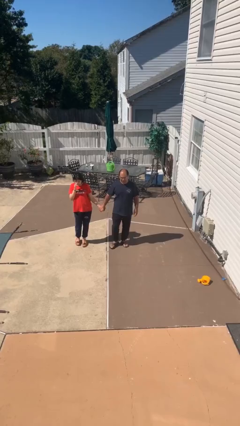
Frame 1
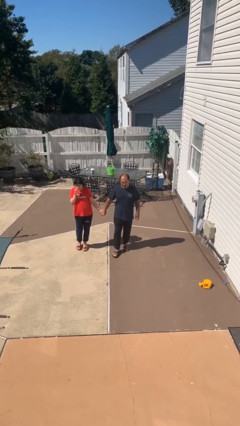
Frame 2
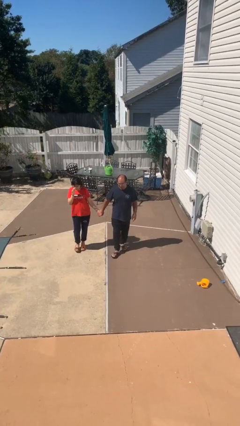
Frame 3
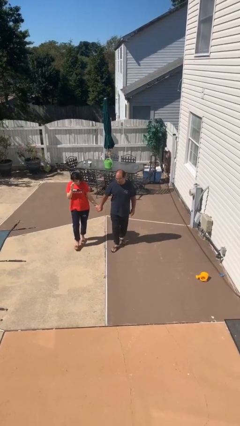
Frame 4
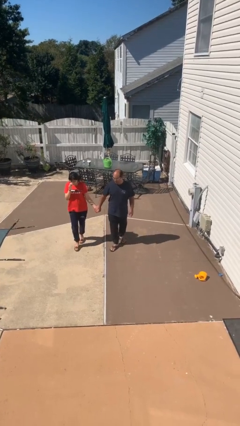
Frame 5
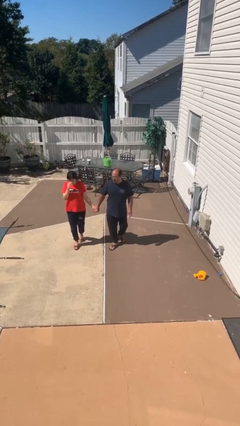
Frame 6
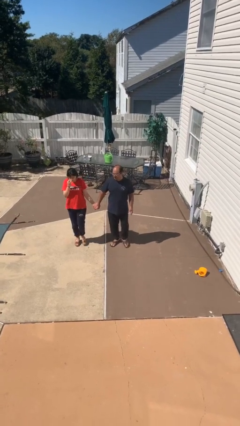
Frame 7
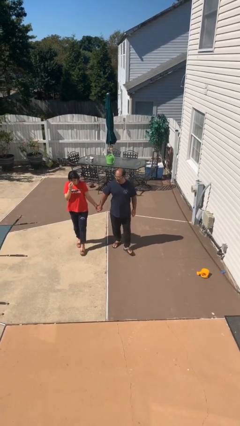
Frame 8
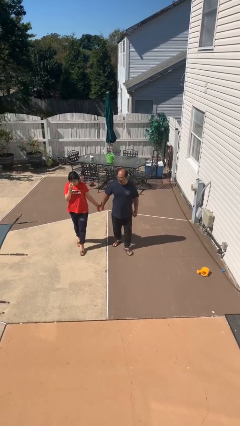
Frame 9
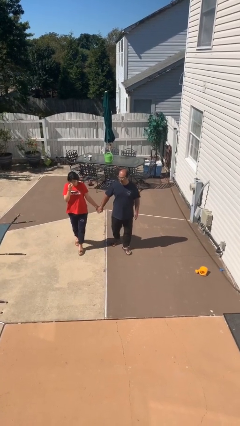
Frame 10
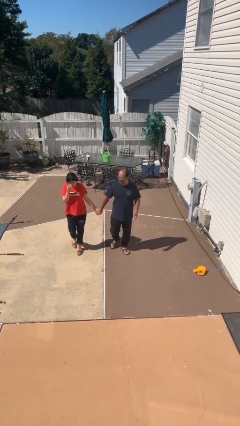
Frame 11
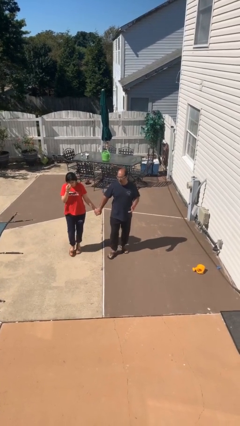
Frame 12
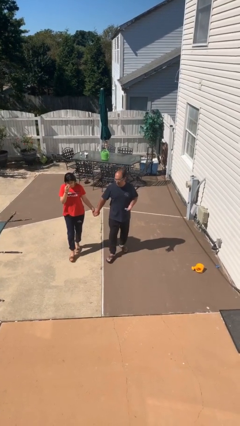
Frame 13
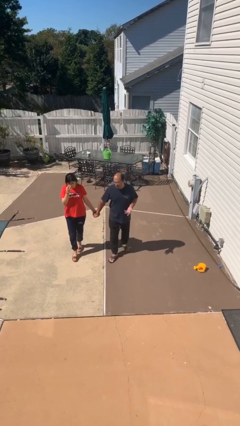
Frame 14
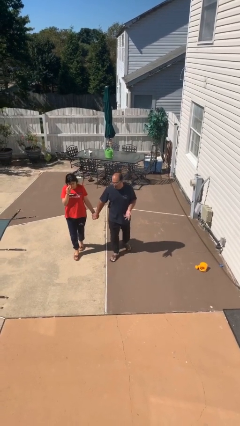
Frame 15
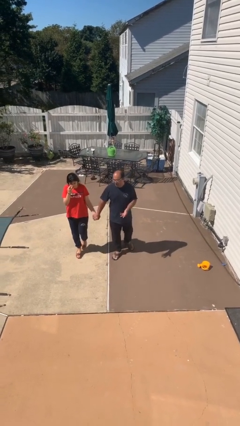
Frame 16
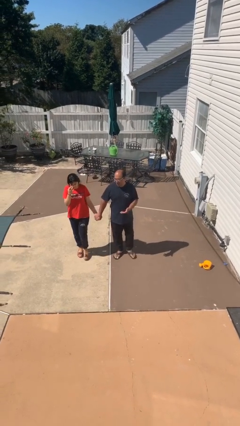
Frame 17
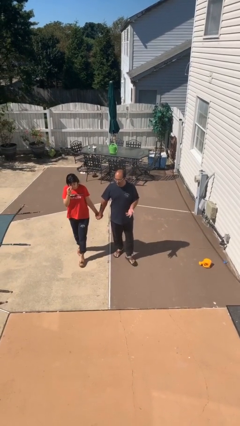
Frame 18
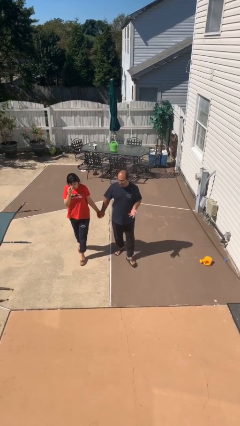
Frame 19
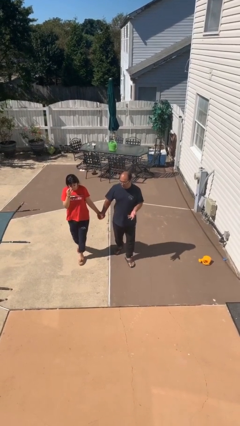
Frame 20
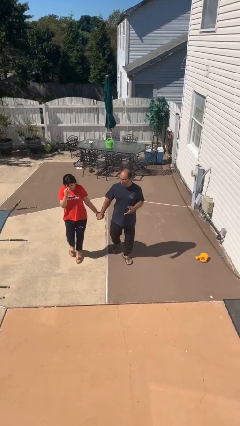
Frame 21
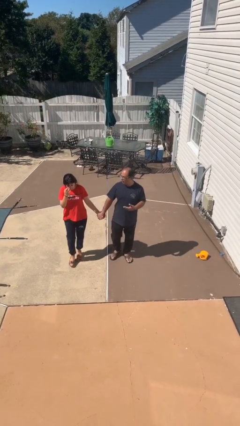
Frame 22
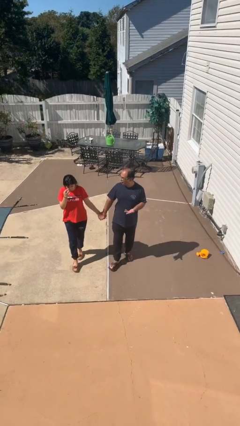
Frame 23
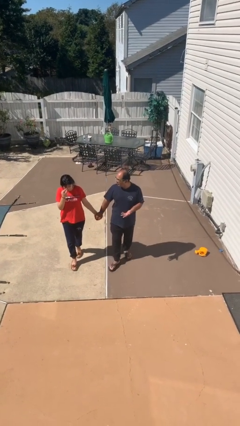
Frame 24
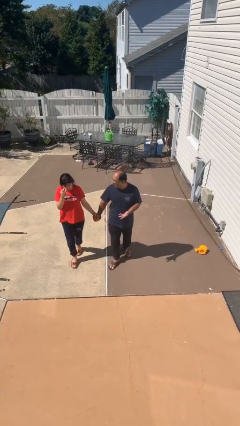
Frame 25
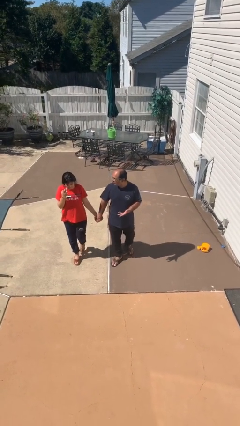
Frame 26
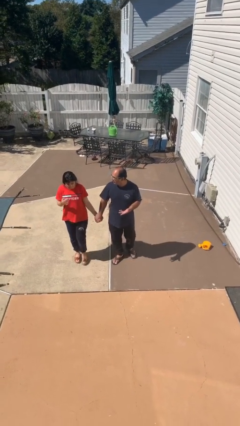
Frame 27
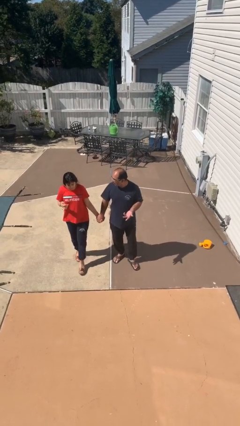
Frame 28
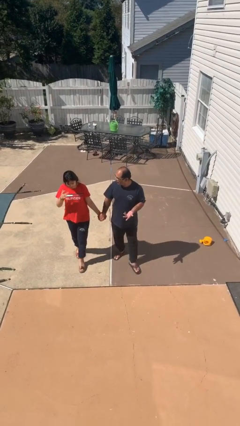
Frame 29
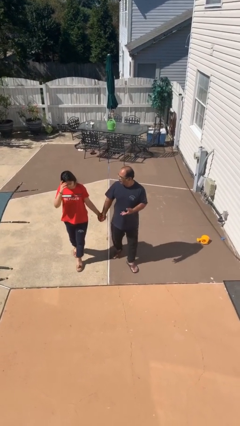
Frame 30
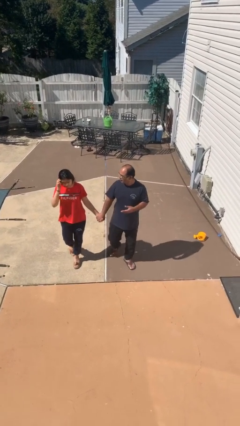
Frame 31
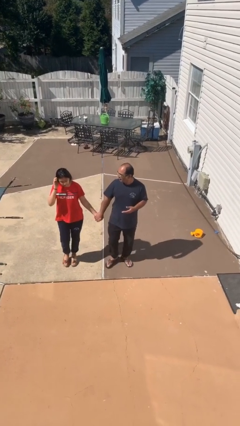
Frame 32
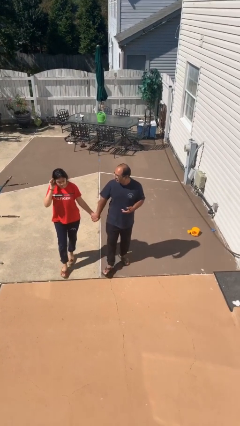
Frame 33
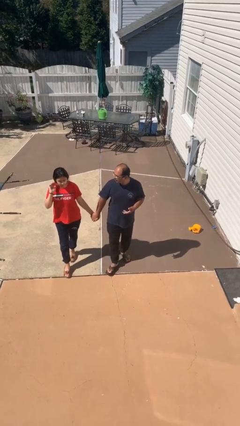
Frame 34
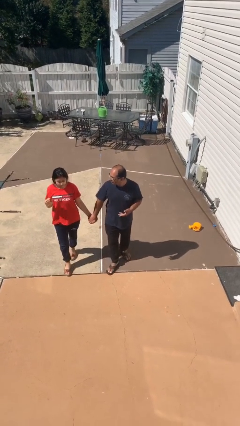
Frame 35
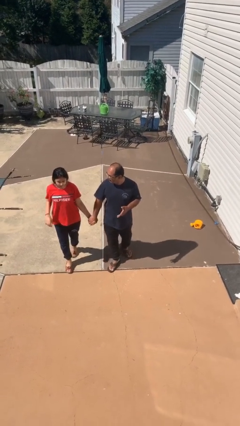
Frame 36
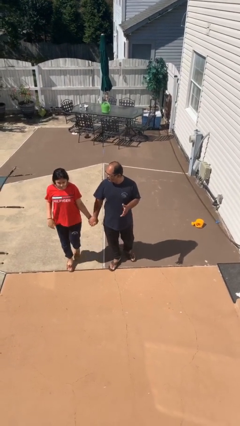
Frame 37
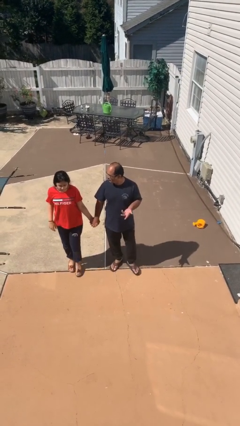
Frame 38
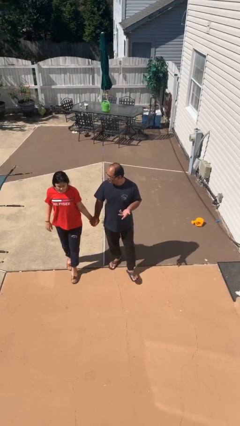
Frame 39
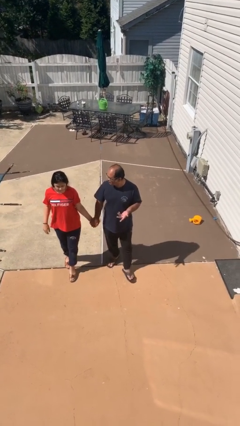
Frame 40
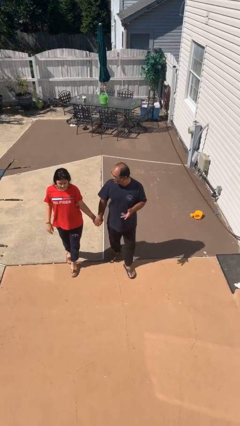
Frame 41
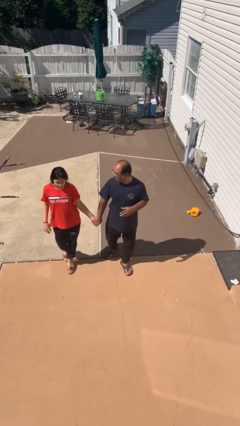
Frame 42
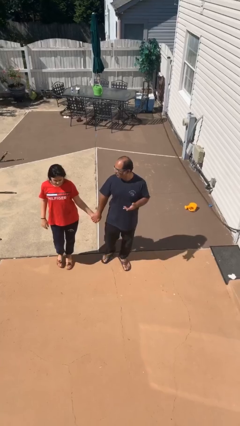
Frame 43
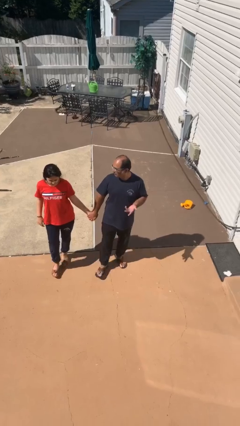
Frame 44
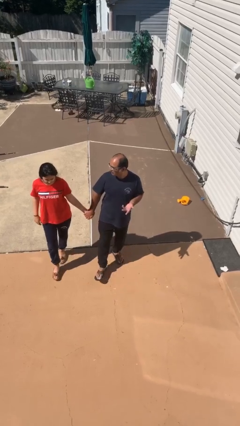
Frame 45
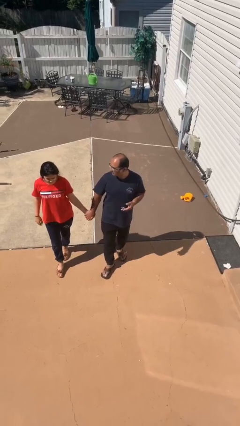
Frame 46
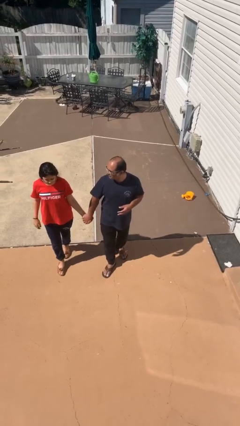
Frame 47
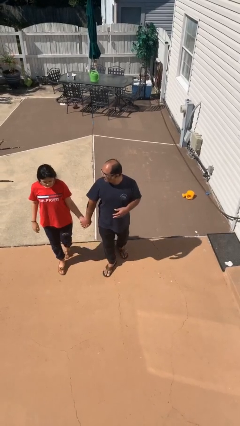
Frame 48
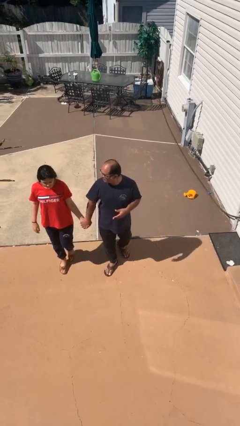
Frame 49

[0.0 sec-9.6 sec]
person holds hand

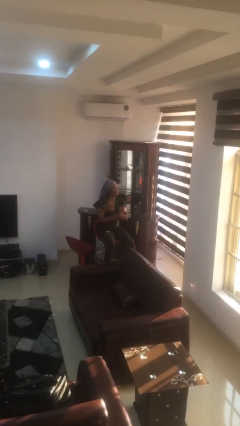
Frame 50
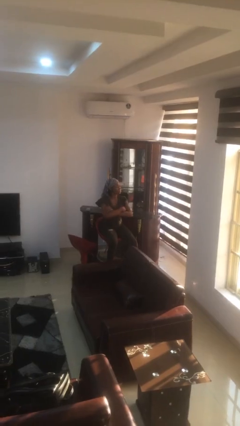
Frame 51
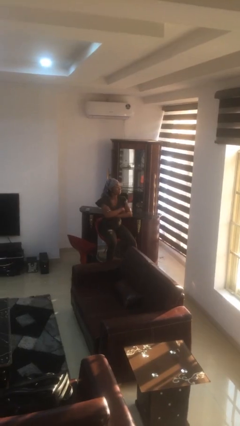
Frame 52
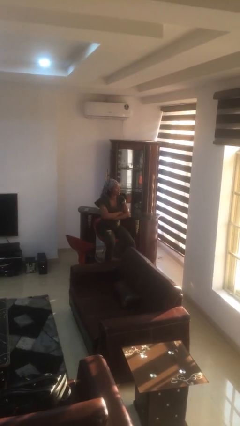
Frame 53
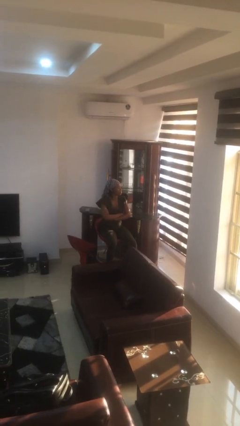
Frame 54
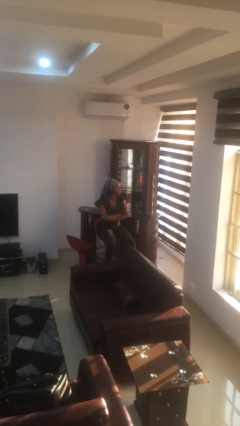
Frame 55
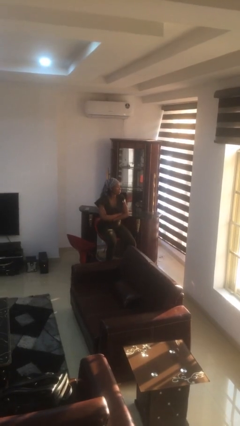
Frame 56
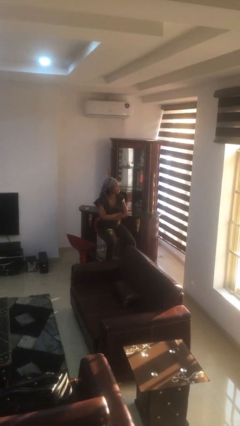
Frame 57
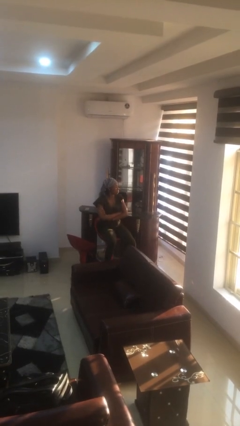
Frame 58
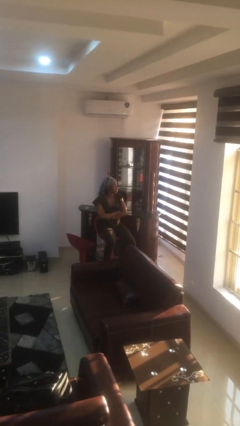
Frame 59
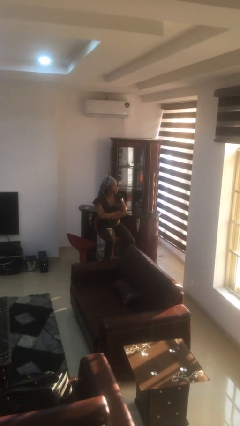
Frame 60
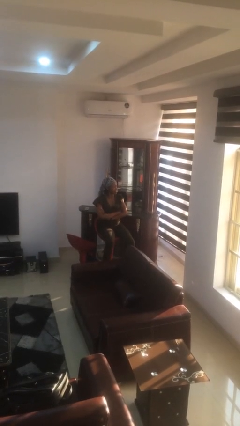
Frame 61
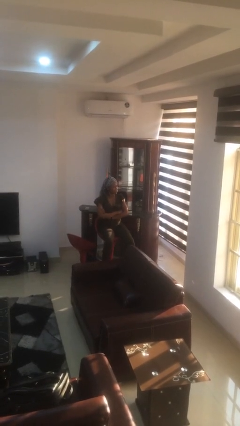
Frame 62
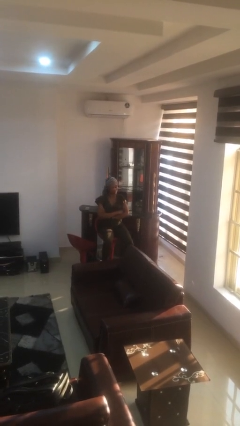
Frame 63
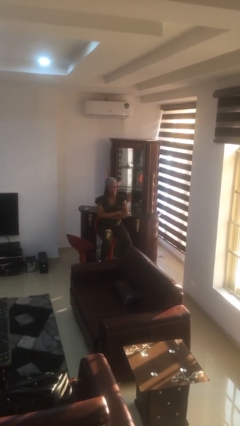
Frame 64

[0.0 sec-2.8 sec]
person crosses arms

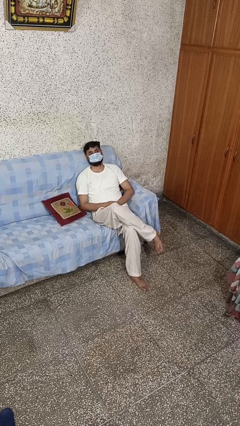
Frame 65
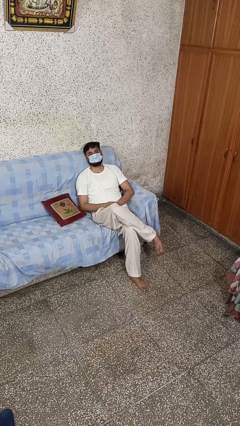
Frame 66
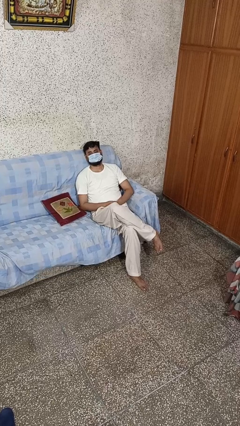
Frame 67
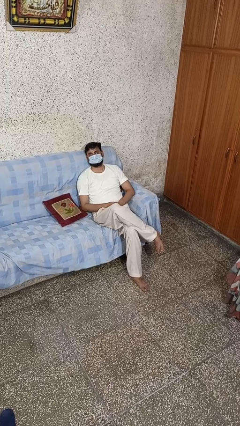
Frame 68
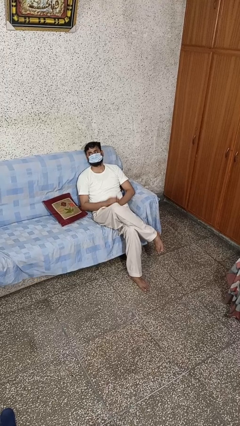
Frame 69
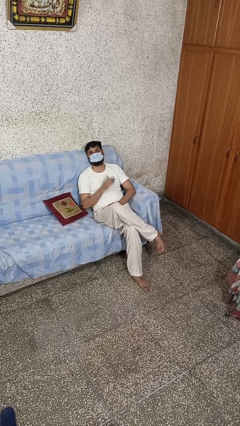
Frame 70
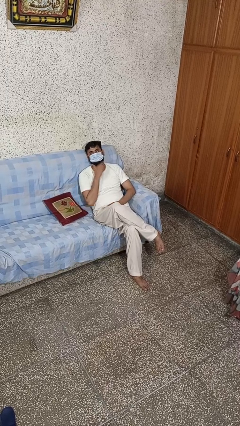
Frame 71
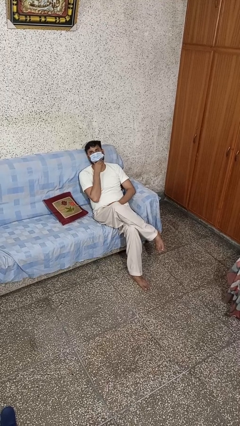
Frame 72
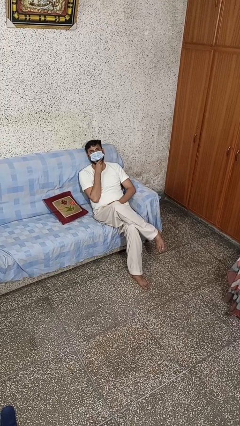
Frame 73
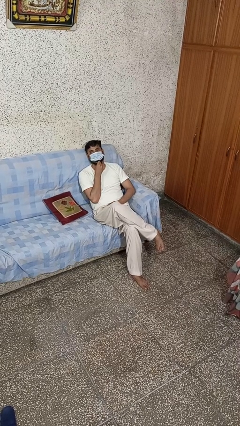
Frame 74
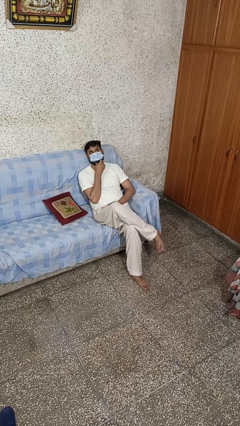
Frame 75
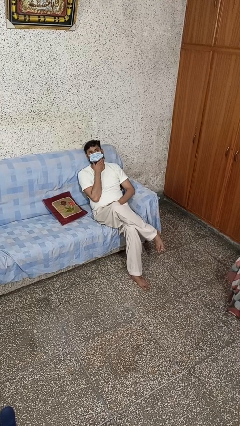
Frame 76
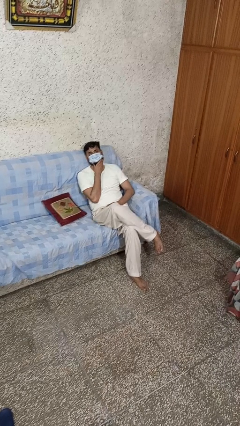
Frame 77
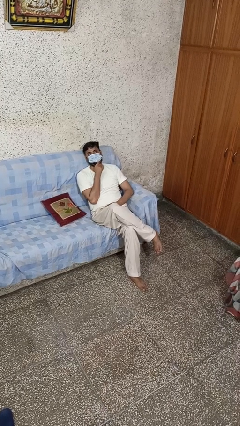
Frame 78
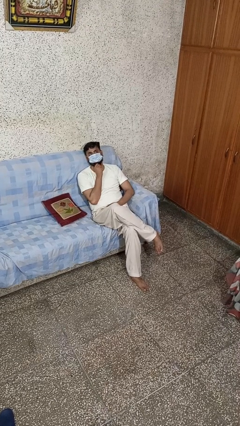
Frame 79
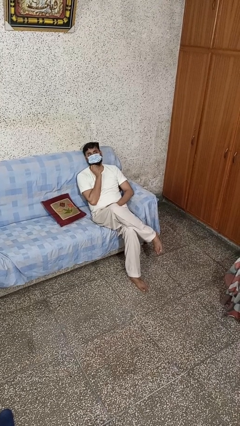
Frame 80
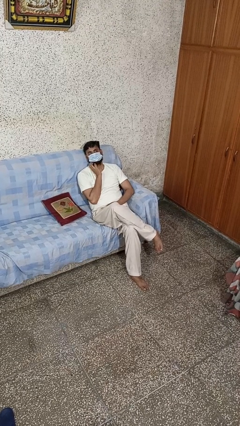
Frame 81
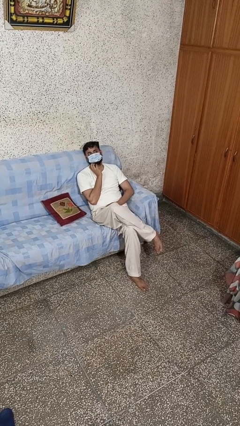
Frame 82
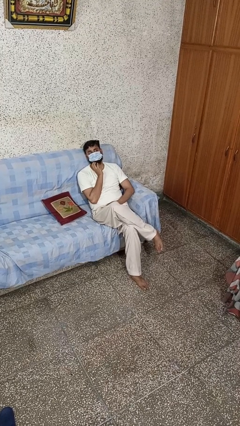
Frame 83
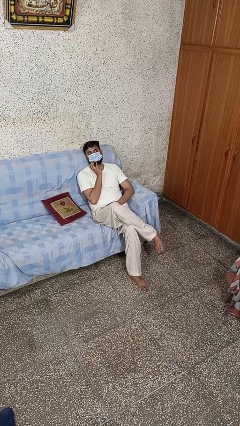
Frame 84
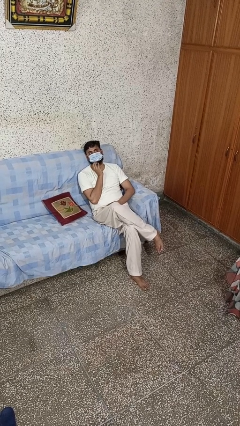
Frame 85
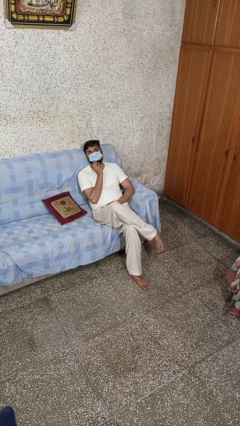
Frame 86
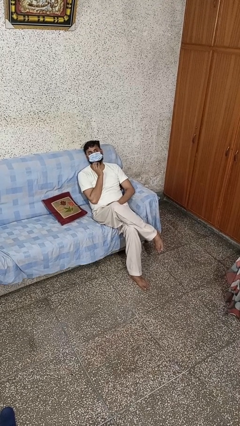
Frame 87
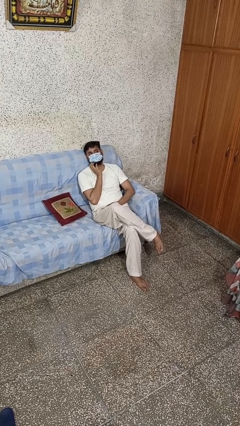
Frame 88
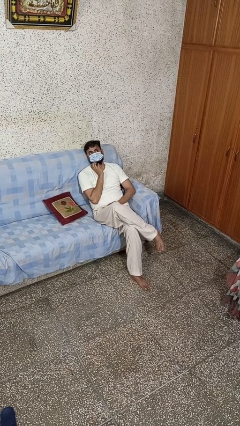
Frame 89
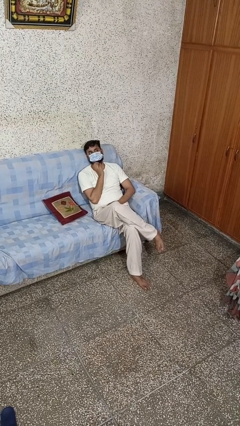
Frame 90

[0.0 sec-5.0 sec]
person strokes chin

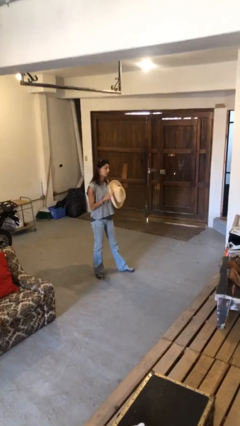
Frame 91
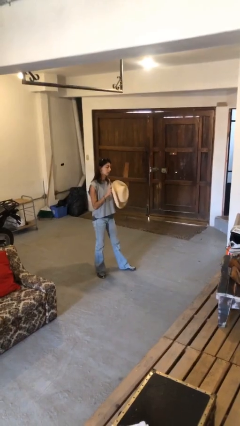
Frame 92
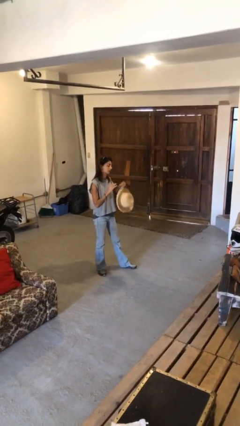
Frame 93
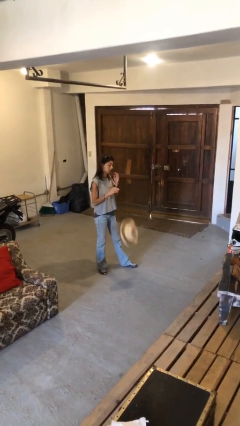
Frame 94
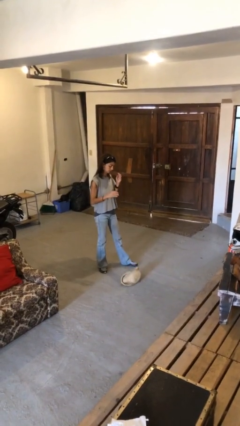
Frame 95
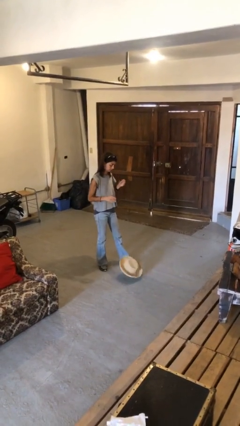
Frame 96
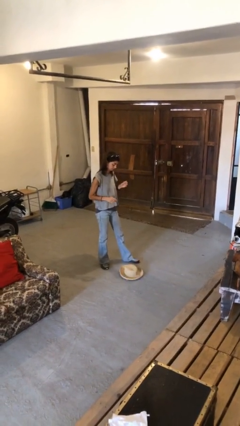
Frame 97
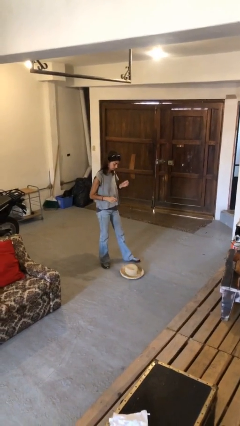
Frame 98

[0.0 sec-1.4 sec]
person drops object
